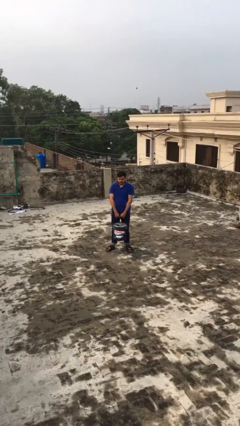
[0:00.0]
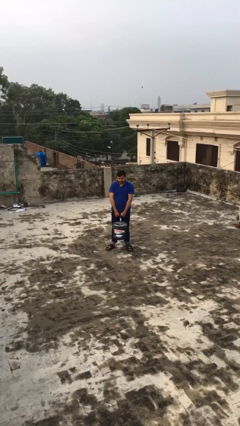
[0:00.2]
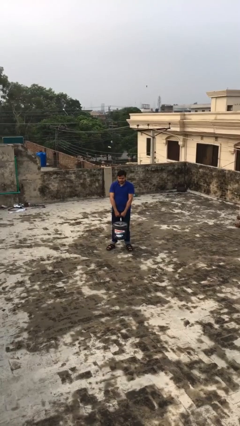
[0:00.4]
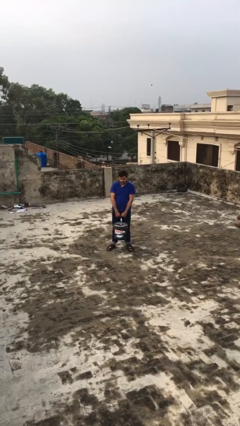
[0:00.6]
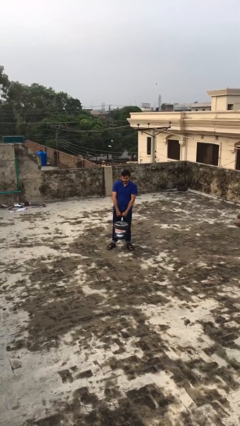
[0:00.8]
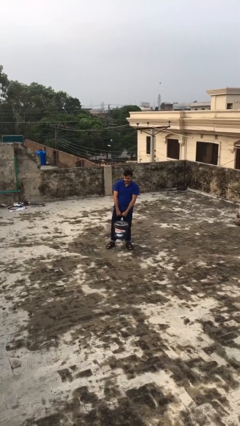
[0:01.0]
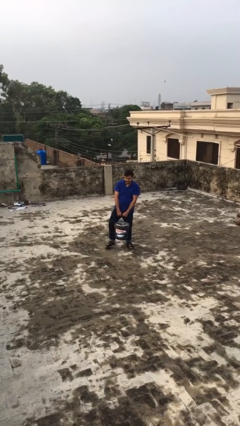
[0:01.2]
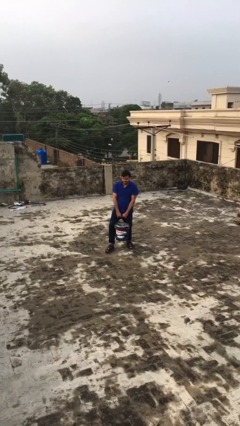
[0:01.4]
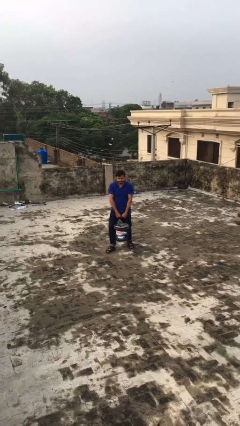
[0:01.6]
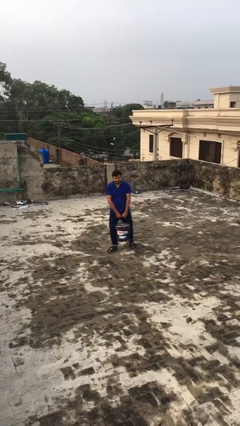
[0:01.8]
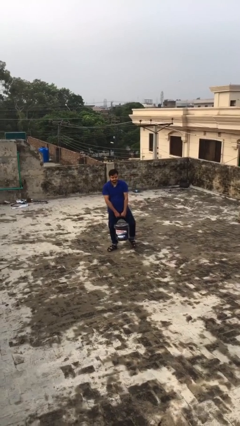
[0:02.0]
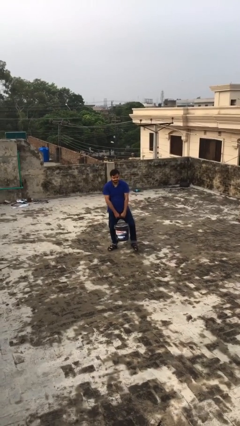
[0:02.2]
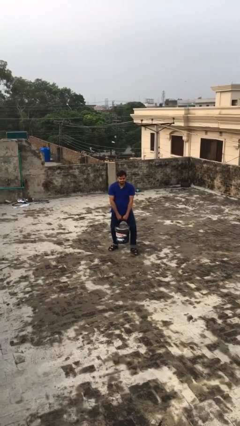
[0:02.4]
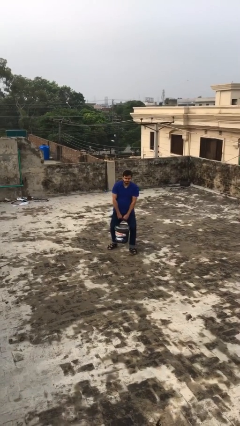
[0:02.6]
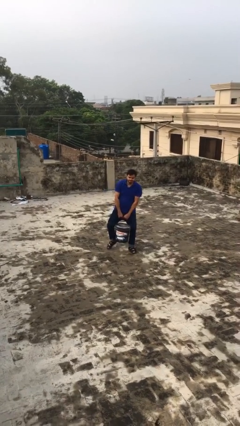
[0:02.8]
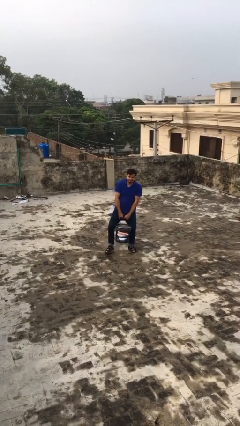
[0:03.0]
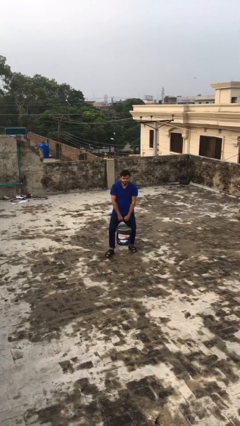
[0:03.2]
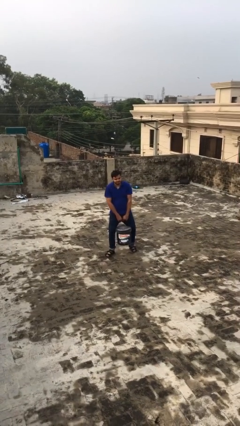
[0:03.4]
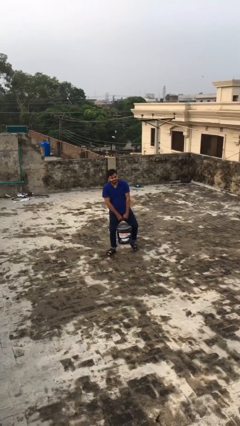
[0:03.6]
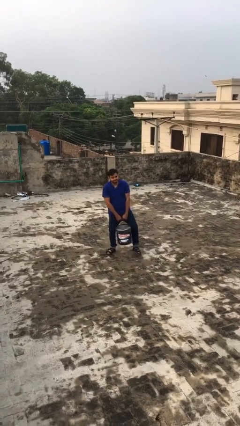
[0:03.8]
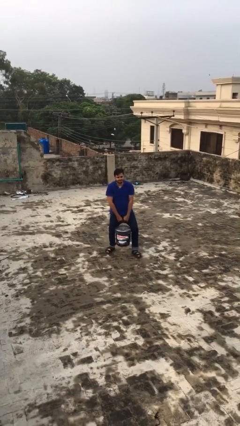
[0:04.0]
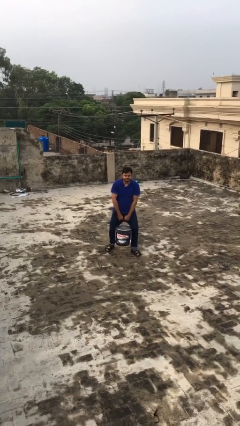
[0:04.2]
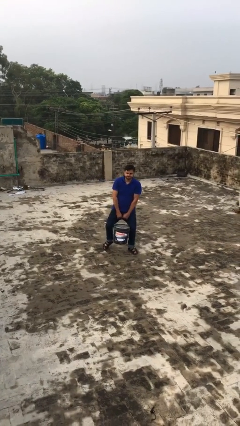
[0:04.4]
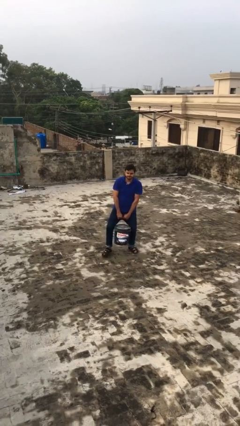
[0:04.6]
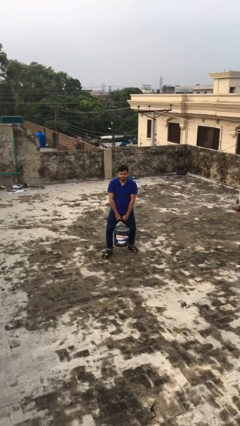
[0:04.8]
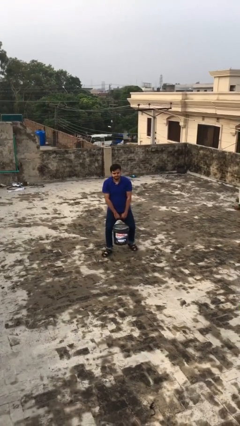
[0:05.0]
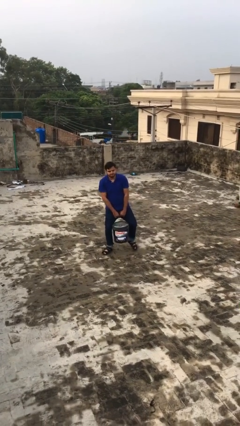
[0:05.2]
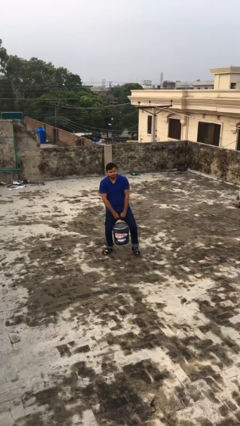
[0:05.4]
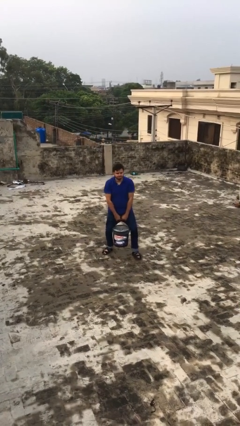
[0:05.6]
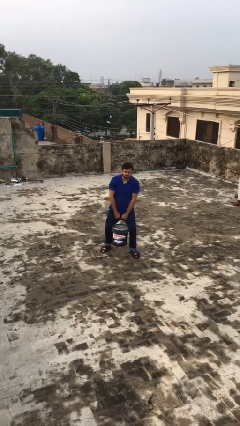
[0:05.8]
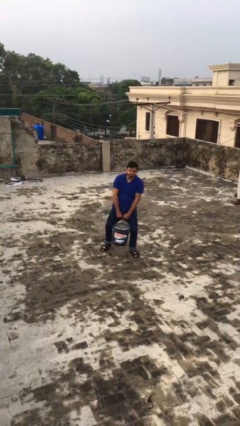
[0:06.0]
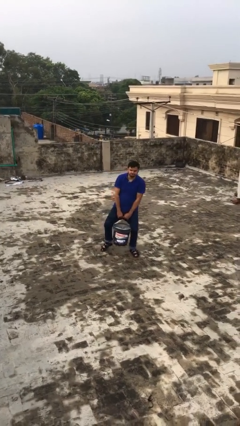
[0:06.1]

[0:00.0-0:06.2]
person puts down object on floor

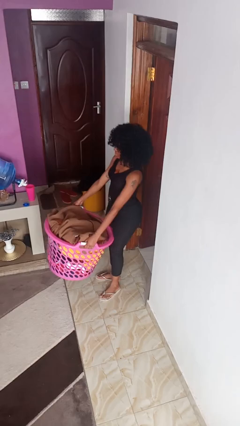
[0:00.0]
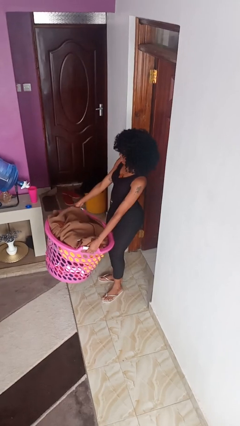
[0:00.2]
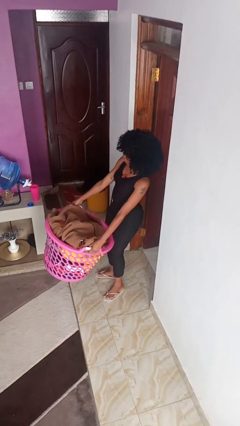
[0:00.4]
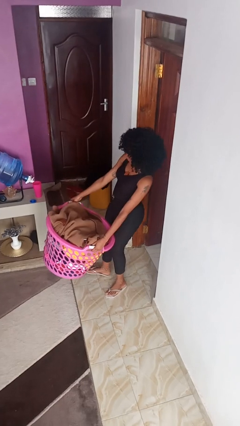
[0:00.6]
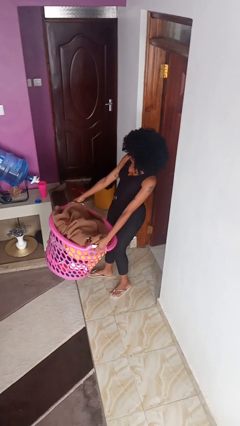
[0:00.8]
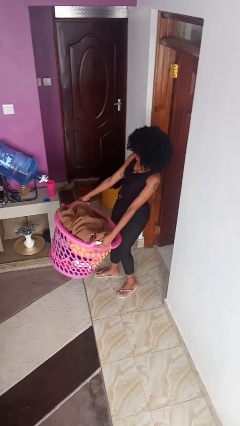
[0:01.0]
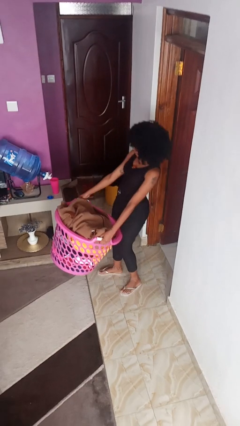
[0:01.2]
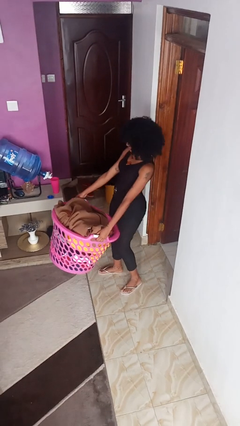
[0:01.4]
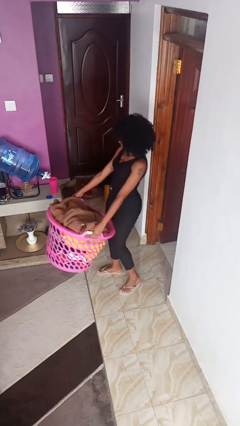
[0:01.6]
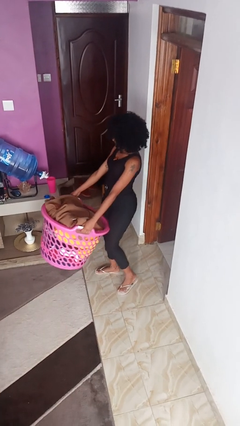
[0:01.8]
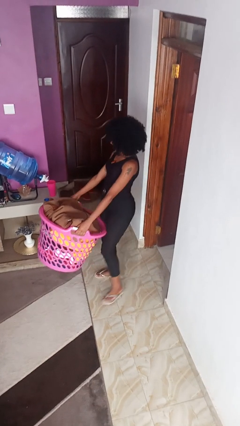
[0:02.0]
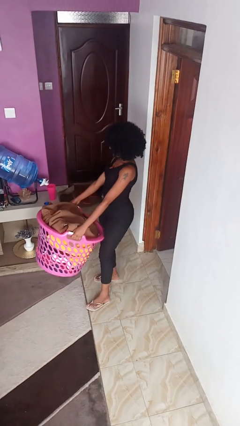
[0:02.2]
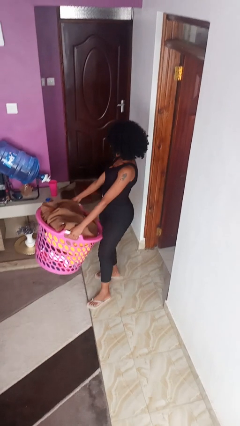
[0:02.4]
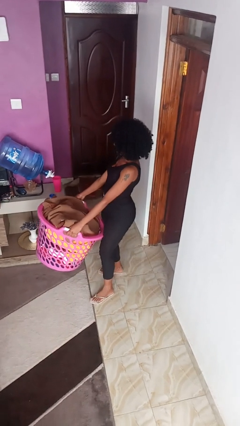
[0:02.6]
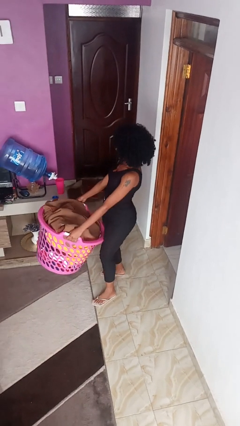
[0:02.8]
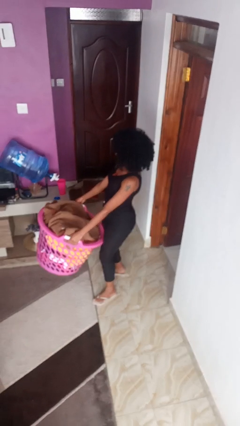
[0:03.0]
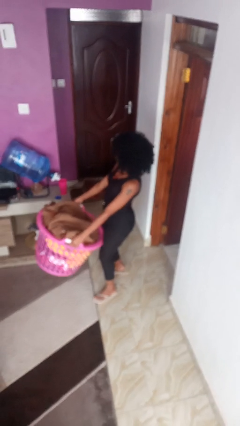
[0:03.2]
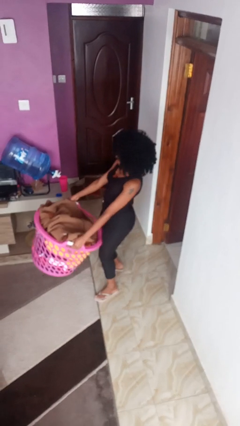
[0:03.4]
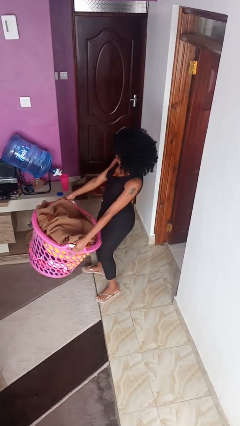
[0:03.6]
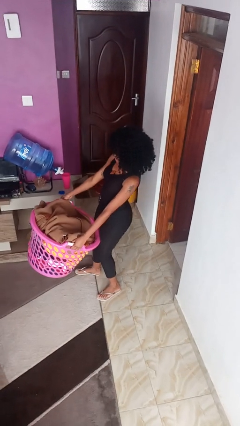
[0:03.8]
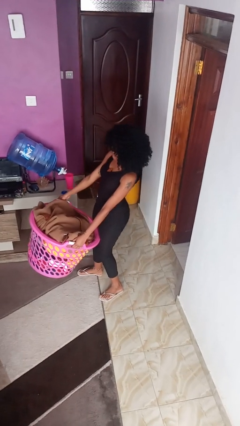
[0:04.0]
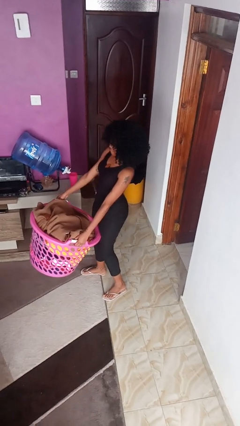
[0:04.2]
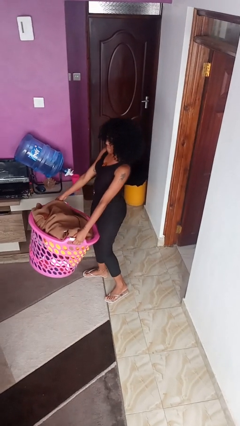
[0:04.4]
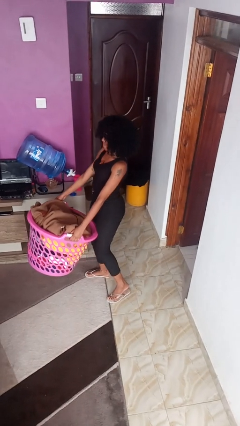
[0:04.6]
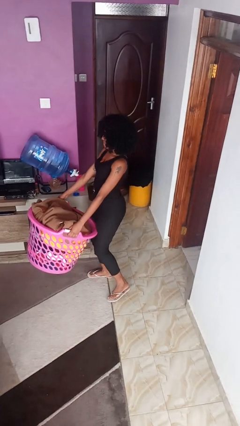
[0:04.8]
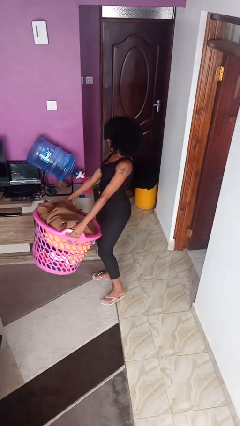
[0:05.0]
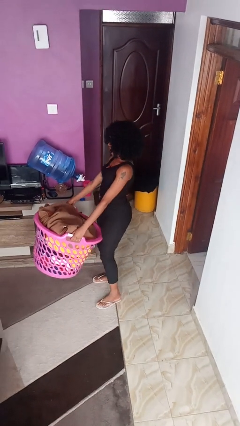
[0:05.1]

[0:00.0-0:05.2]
person carries laundry basket

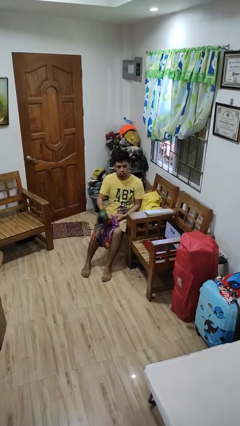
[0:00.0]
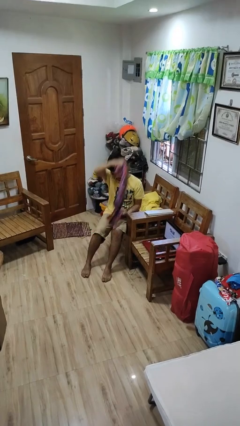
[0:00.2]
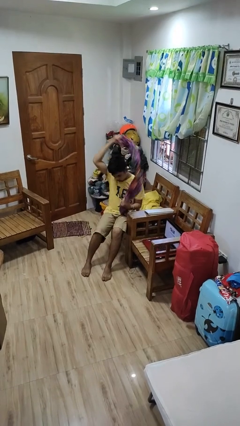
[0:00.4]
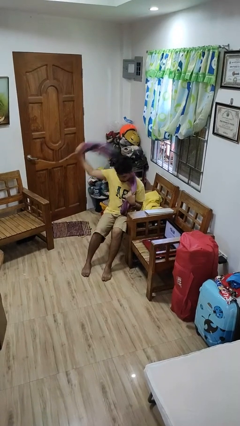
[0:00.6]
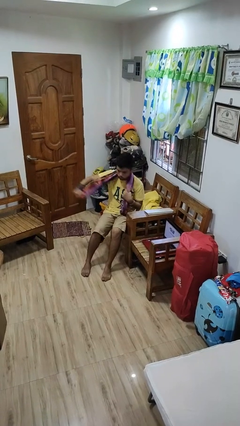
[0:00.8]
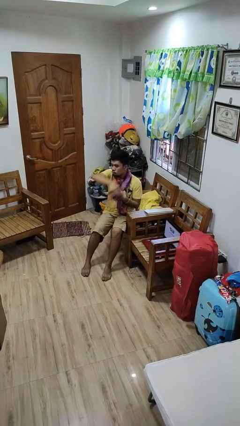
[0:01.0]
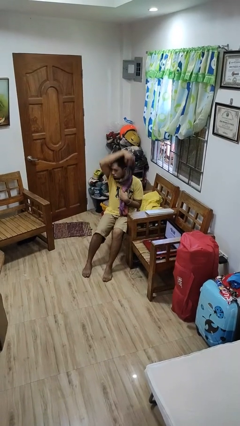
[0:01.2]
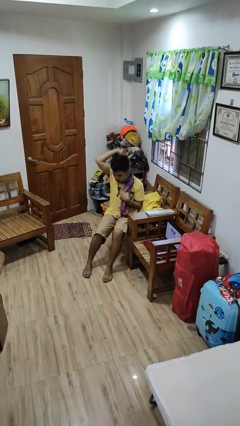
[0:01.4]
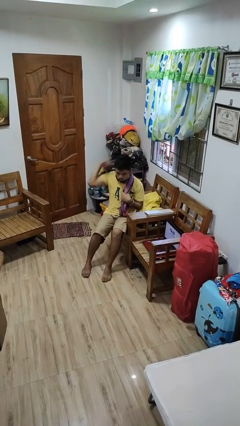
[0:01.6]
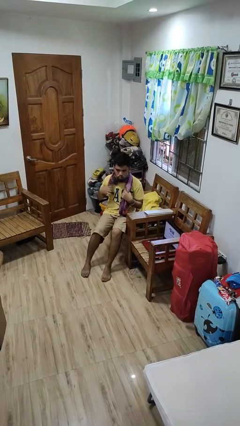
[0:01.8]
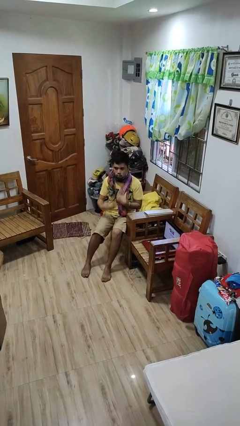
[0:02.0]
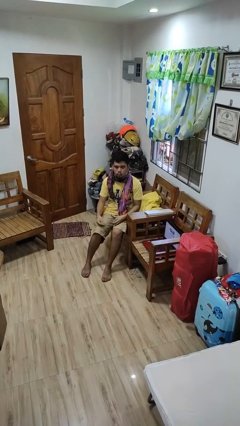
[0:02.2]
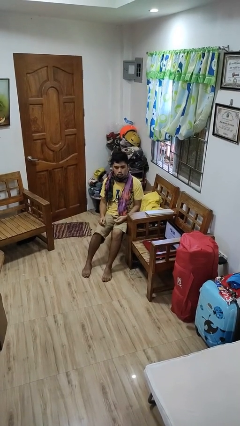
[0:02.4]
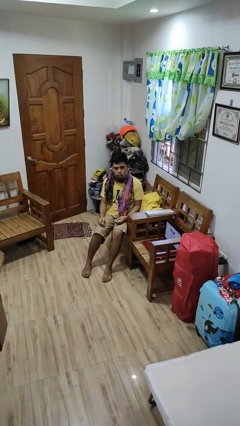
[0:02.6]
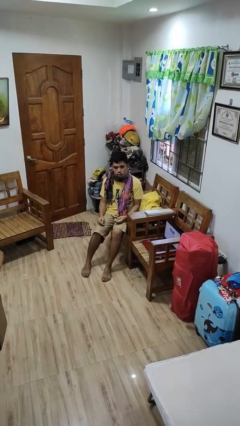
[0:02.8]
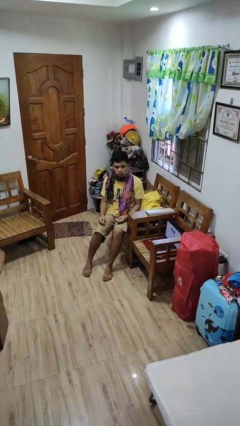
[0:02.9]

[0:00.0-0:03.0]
person puts on scarf

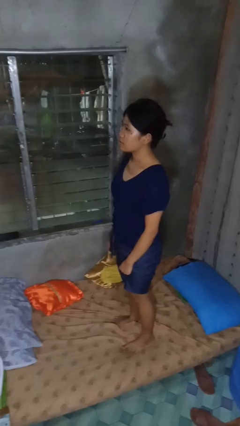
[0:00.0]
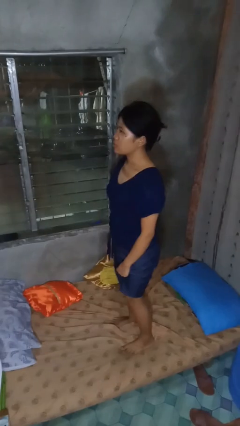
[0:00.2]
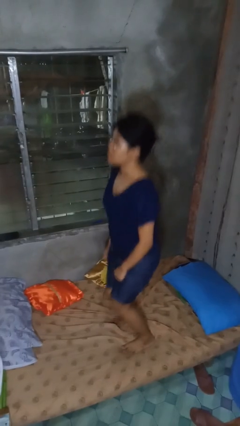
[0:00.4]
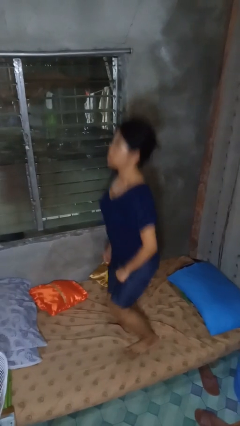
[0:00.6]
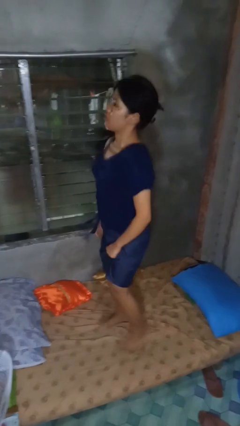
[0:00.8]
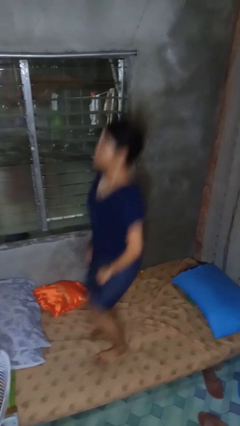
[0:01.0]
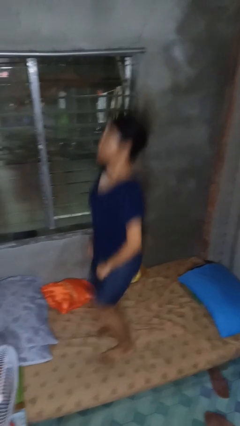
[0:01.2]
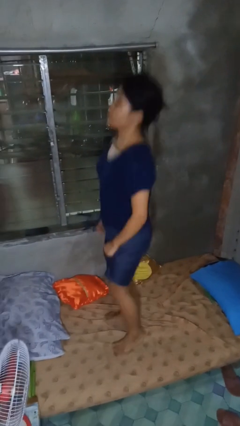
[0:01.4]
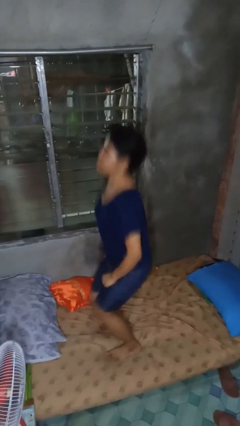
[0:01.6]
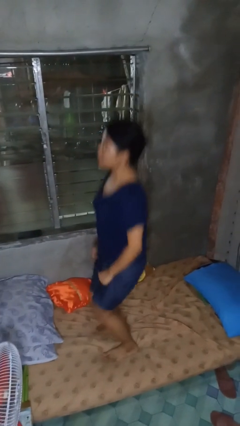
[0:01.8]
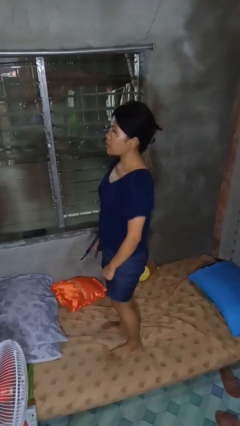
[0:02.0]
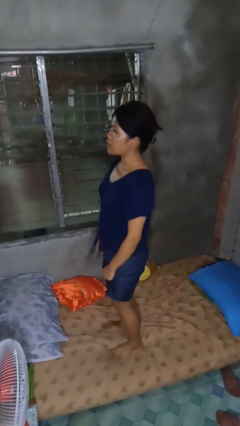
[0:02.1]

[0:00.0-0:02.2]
person jumps on bed

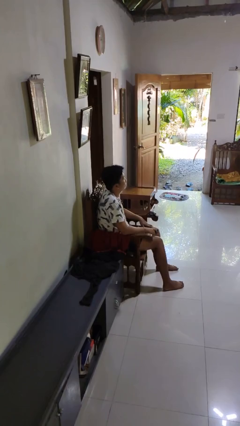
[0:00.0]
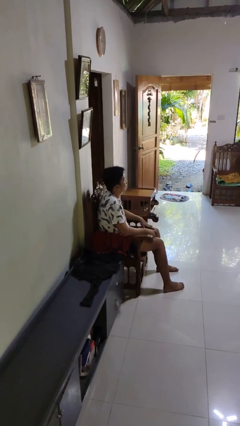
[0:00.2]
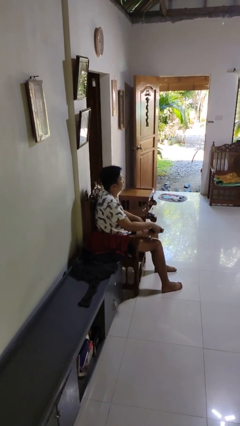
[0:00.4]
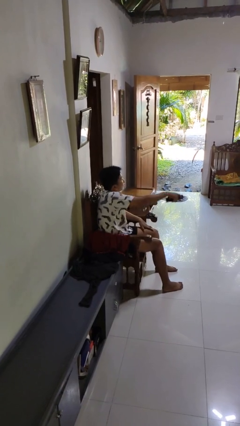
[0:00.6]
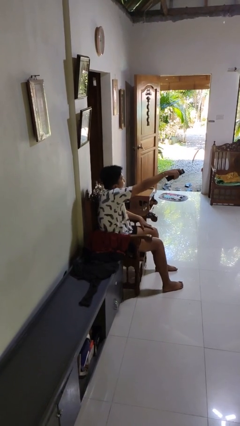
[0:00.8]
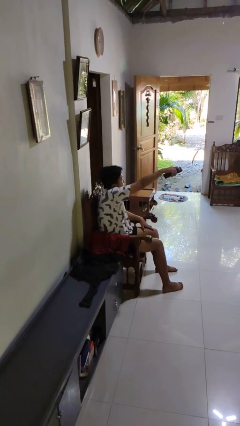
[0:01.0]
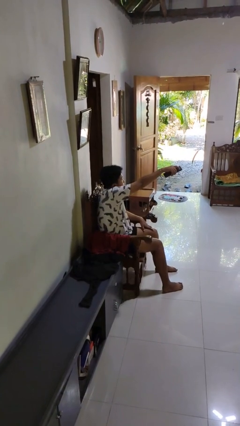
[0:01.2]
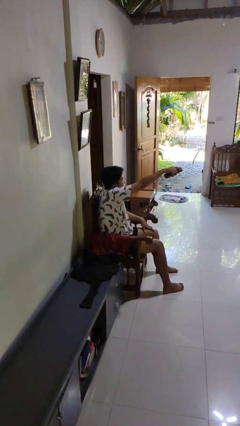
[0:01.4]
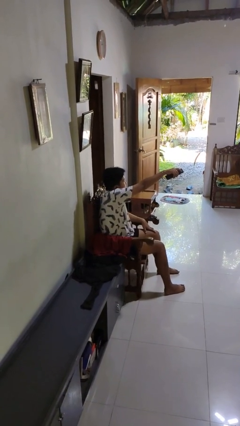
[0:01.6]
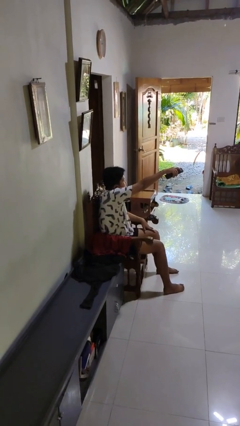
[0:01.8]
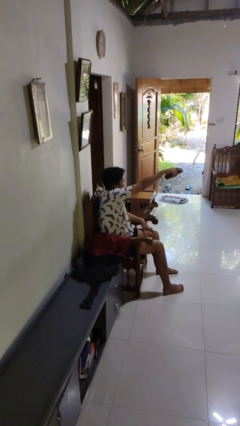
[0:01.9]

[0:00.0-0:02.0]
person uses television remote
